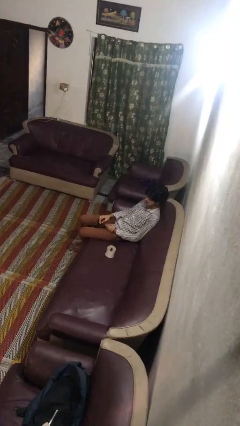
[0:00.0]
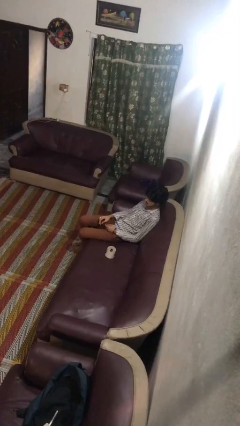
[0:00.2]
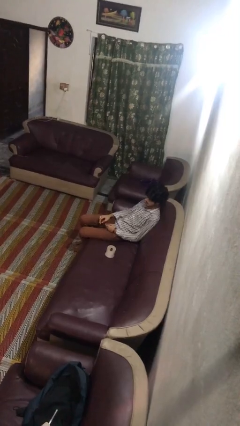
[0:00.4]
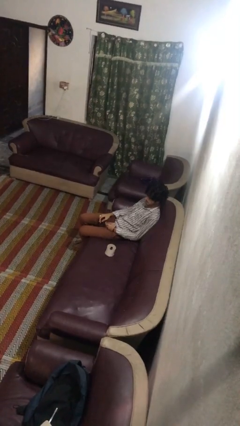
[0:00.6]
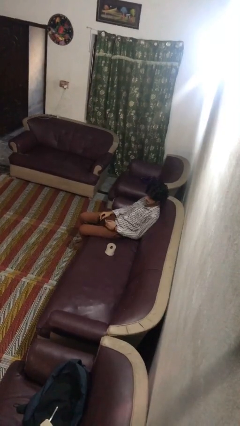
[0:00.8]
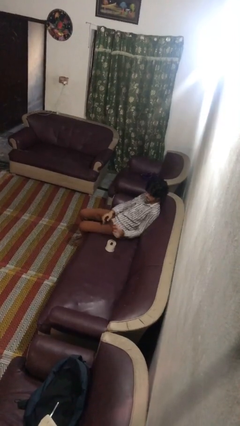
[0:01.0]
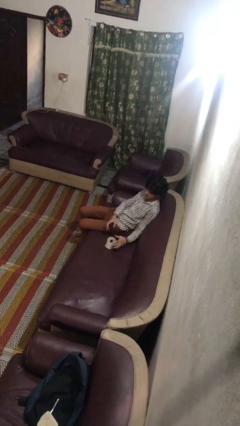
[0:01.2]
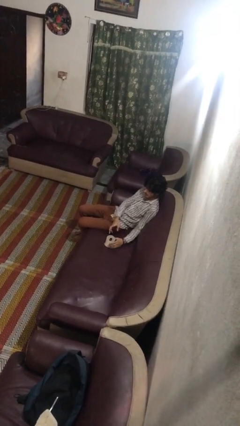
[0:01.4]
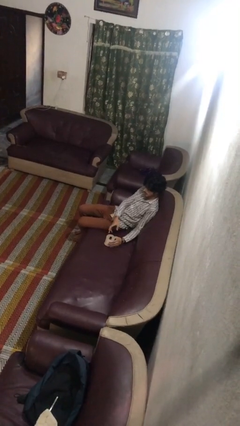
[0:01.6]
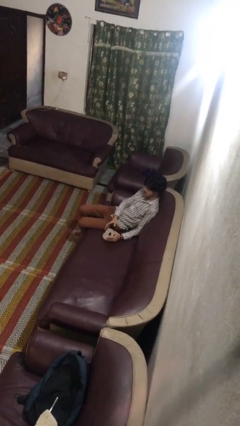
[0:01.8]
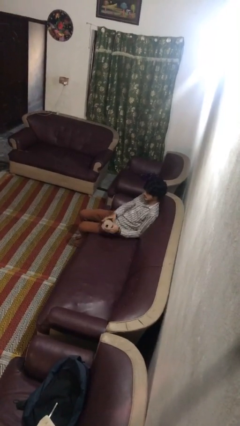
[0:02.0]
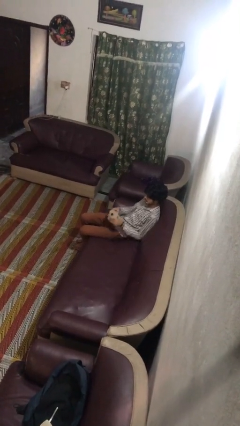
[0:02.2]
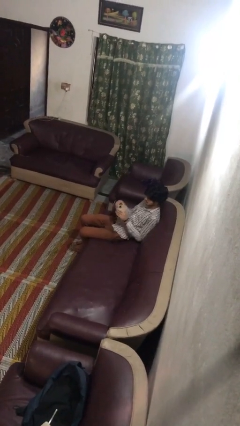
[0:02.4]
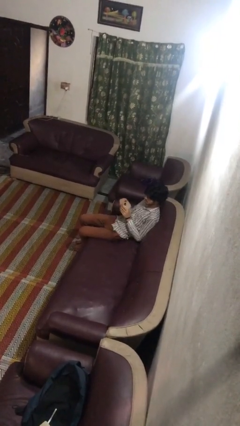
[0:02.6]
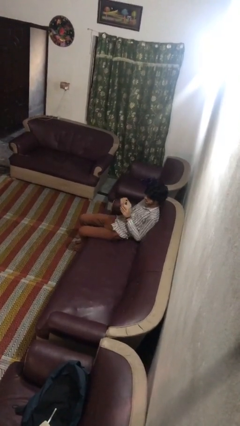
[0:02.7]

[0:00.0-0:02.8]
person picks up object from couch

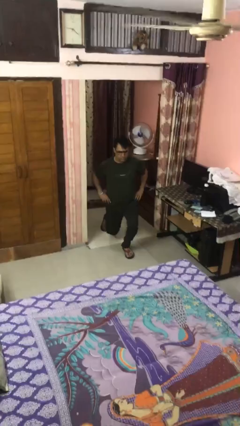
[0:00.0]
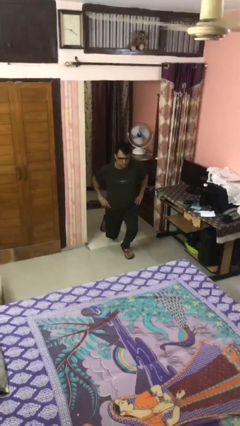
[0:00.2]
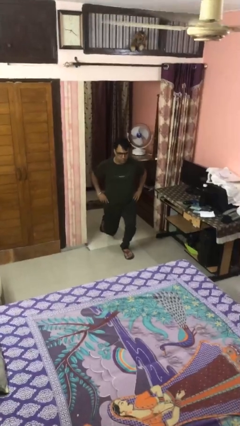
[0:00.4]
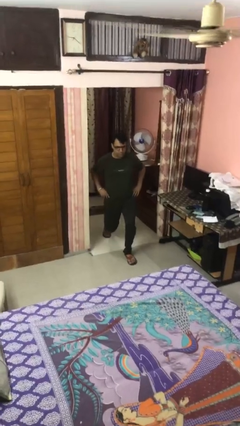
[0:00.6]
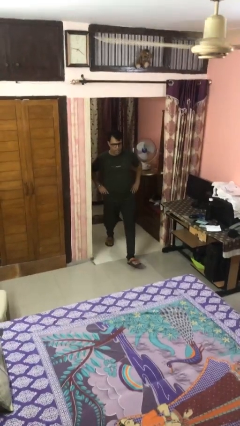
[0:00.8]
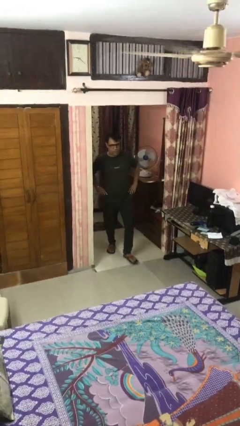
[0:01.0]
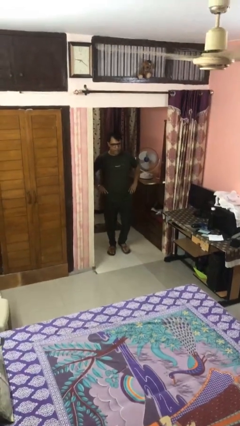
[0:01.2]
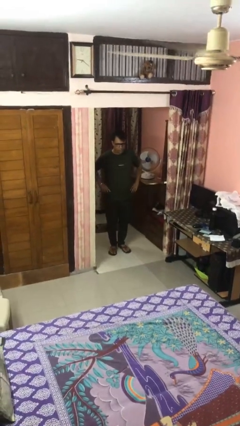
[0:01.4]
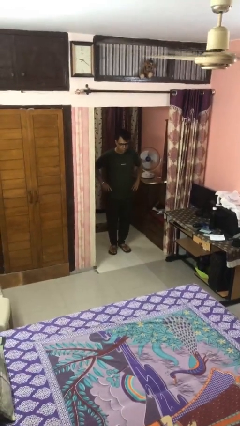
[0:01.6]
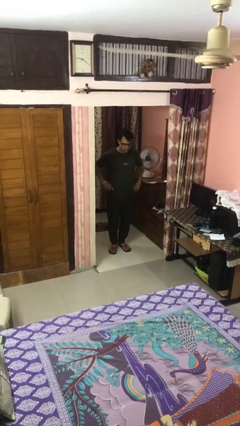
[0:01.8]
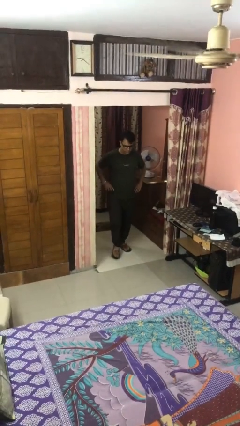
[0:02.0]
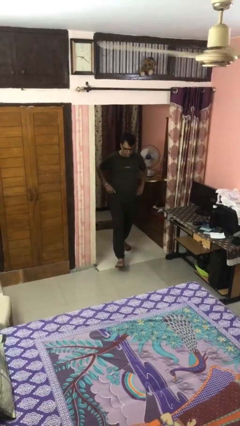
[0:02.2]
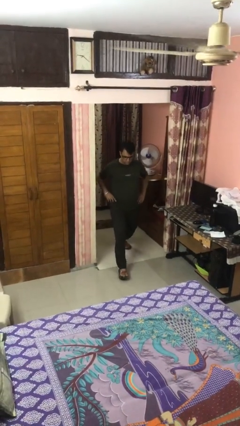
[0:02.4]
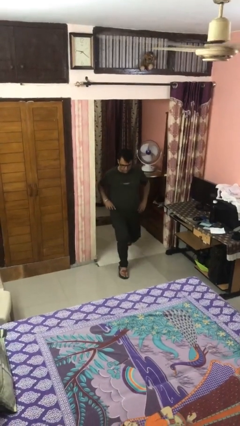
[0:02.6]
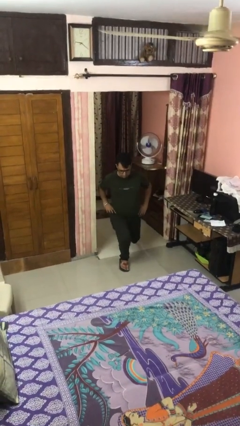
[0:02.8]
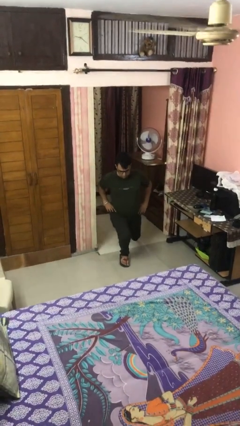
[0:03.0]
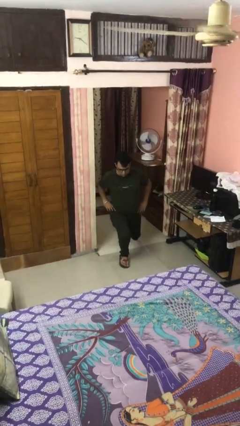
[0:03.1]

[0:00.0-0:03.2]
person exercises with lunges

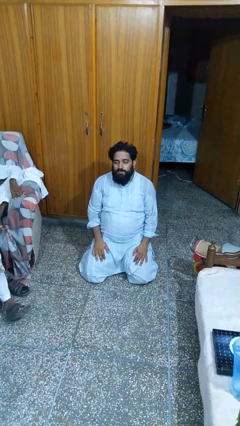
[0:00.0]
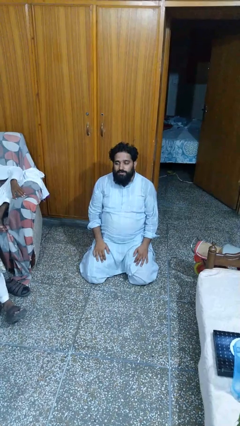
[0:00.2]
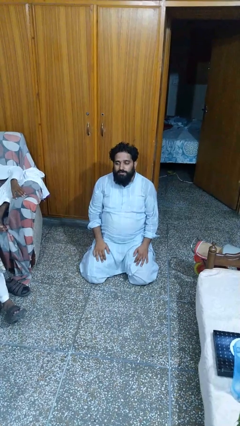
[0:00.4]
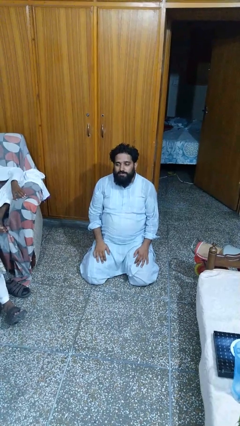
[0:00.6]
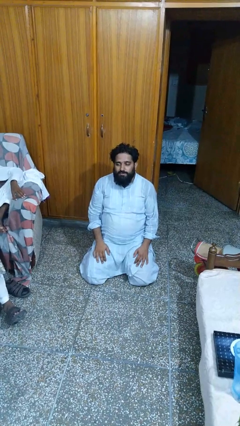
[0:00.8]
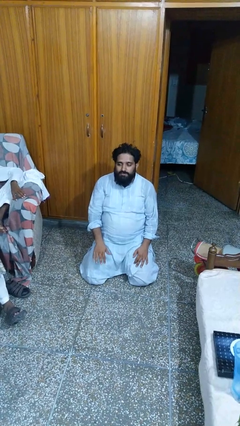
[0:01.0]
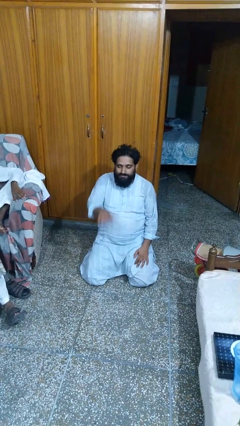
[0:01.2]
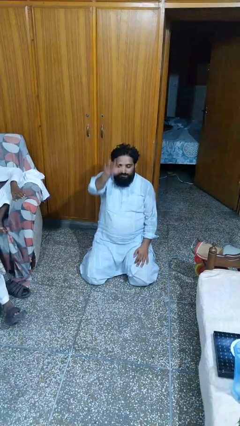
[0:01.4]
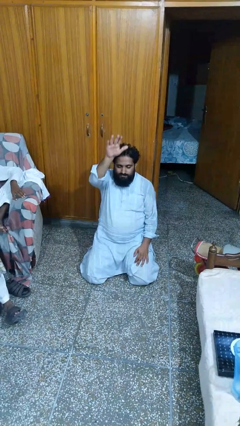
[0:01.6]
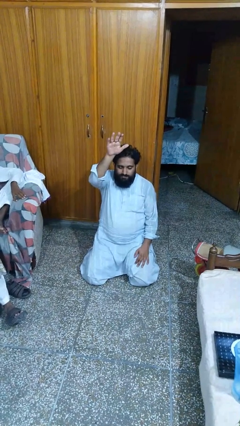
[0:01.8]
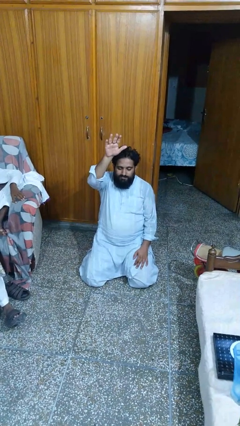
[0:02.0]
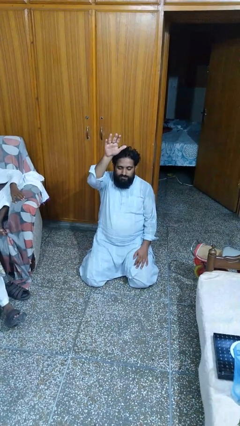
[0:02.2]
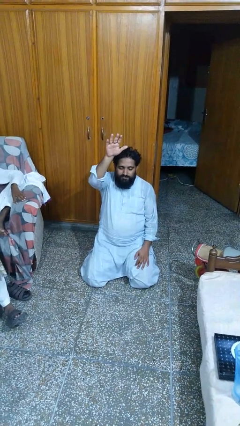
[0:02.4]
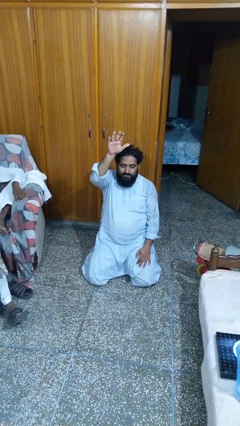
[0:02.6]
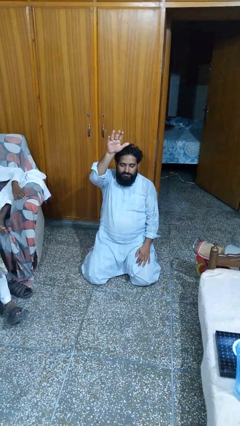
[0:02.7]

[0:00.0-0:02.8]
person gestures raise hand

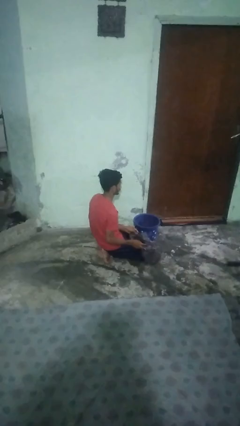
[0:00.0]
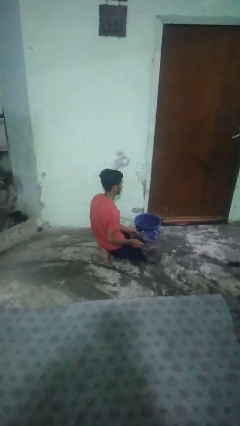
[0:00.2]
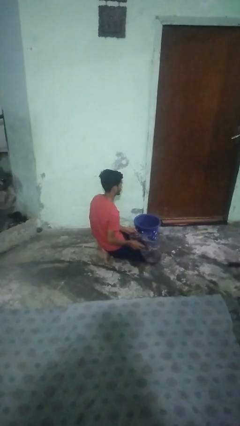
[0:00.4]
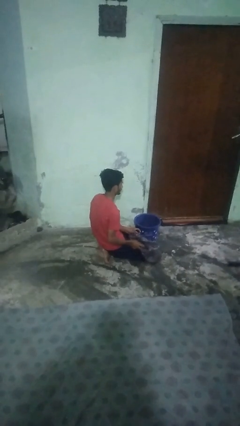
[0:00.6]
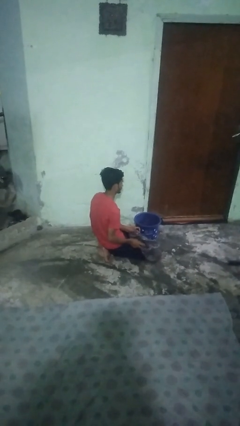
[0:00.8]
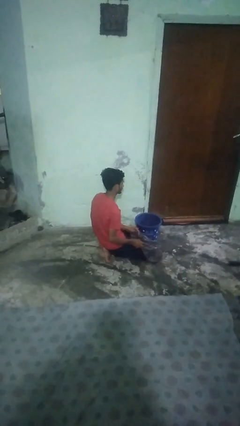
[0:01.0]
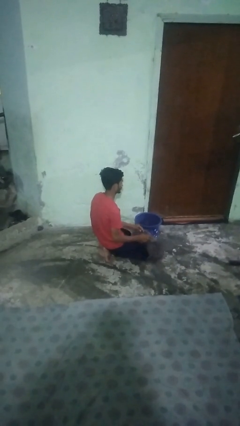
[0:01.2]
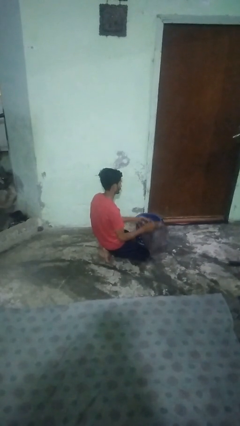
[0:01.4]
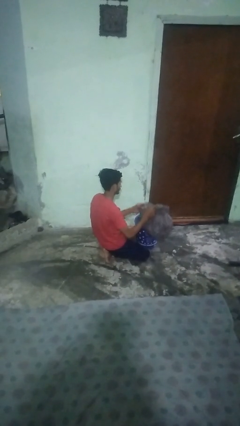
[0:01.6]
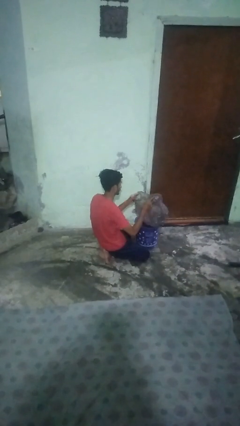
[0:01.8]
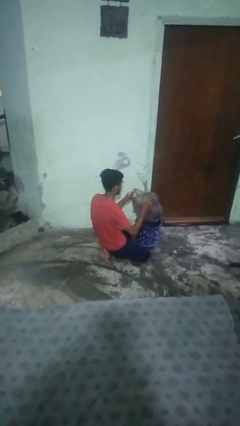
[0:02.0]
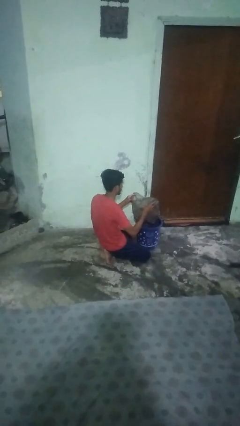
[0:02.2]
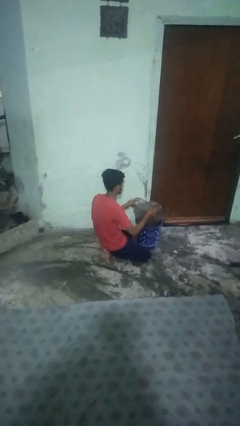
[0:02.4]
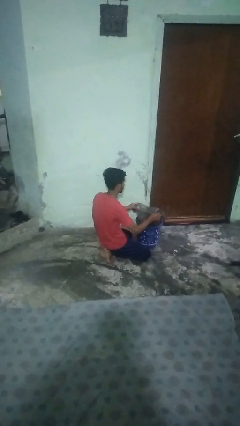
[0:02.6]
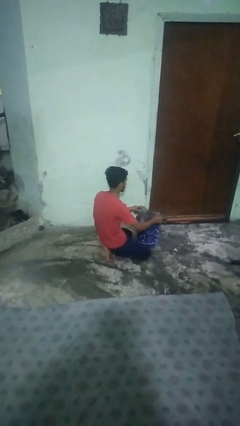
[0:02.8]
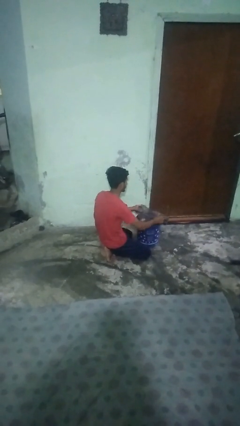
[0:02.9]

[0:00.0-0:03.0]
person inserts trashbag into trashcan

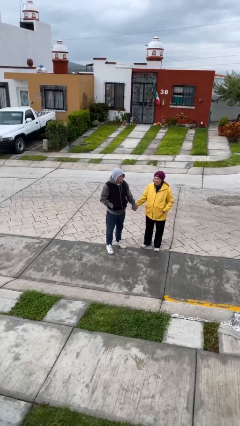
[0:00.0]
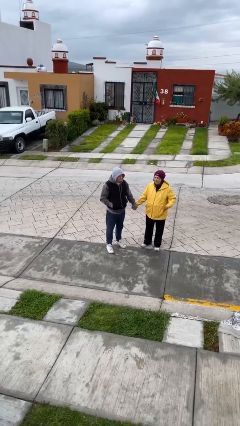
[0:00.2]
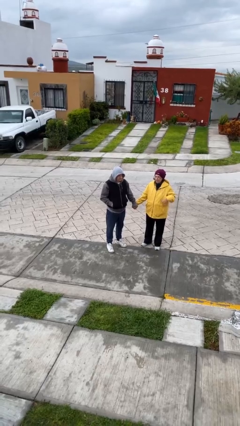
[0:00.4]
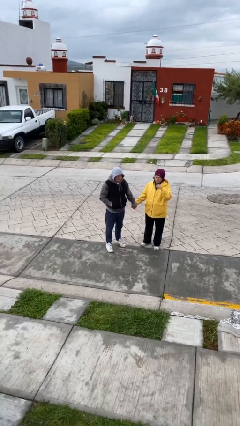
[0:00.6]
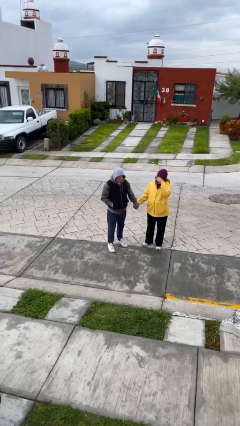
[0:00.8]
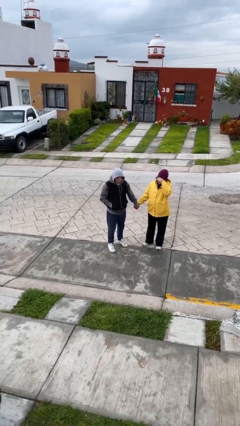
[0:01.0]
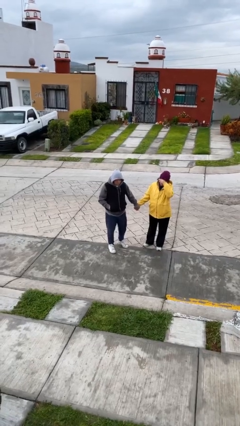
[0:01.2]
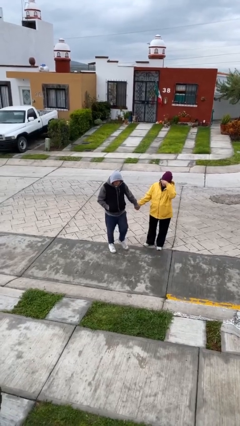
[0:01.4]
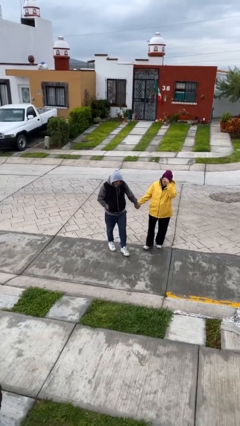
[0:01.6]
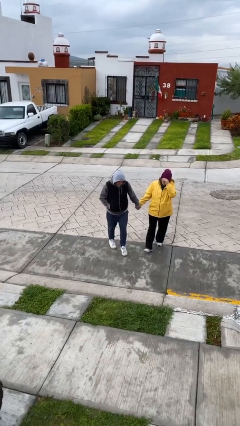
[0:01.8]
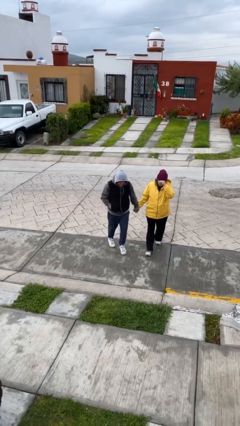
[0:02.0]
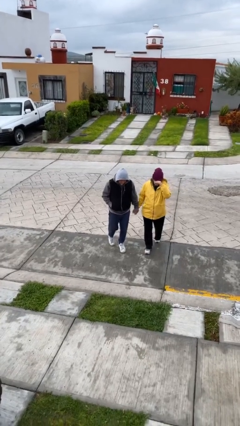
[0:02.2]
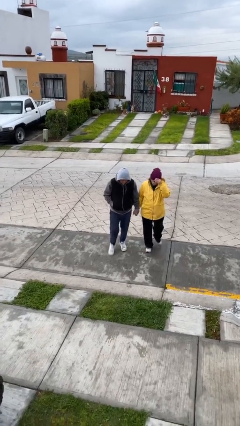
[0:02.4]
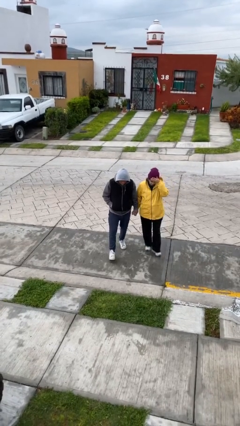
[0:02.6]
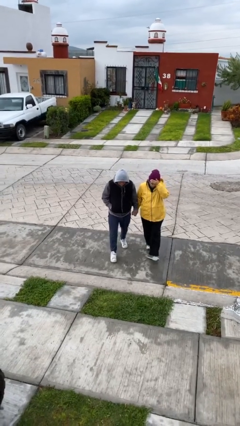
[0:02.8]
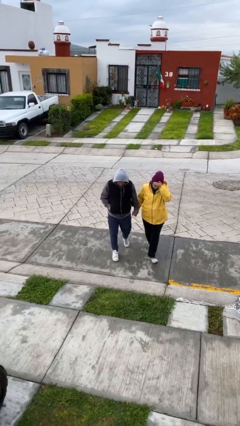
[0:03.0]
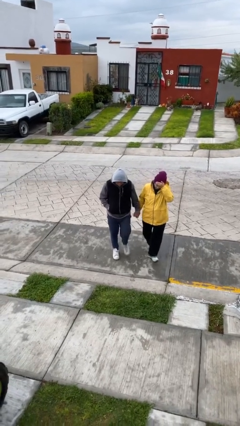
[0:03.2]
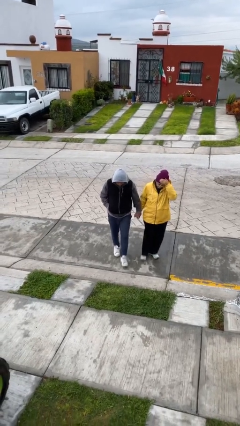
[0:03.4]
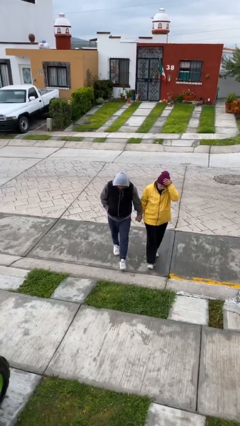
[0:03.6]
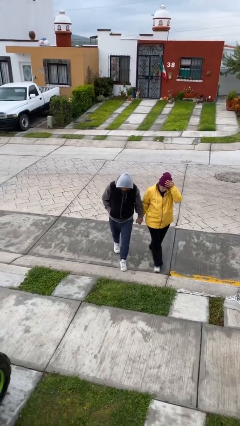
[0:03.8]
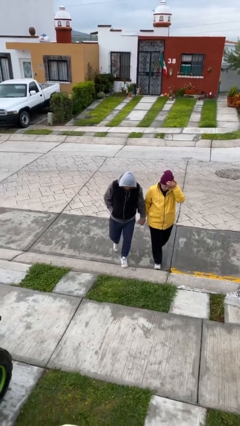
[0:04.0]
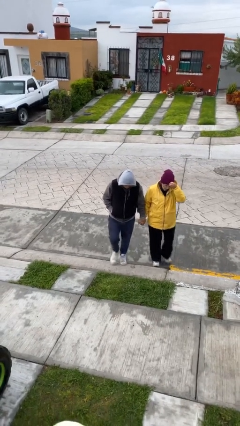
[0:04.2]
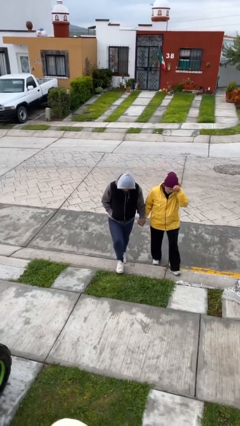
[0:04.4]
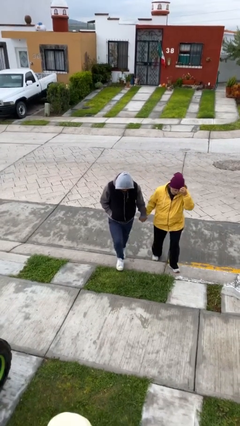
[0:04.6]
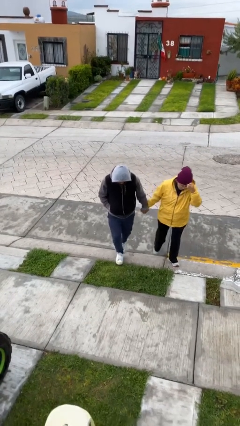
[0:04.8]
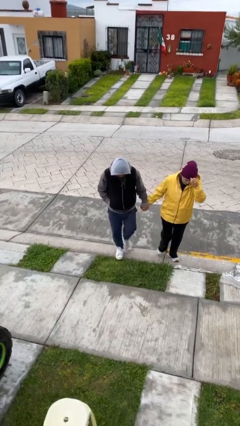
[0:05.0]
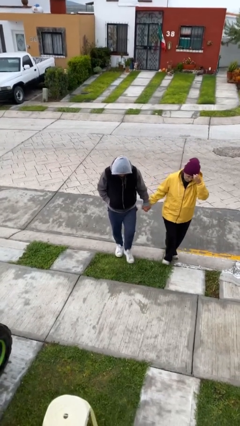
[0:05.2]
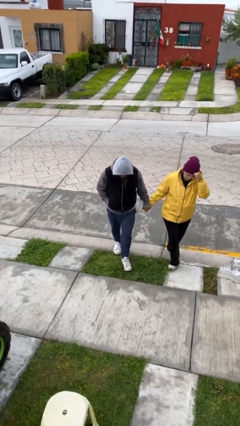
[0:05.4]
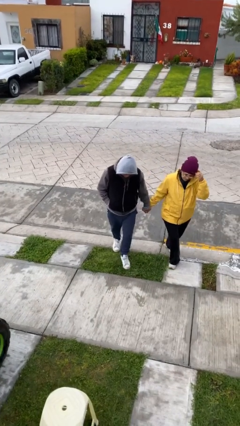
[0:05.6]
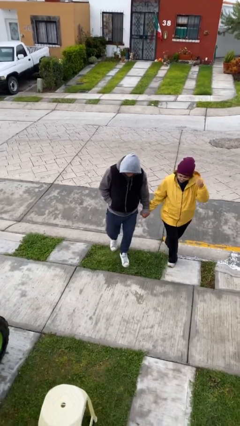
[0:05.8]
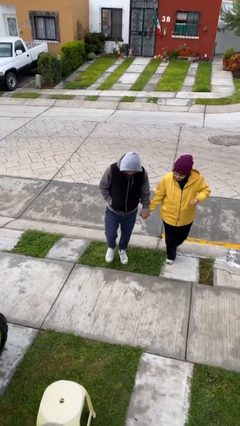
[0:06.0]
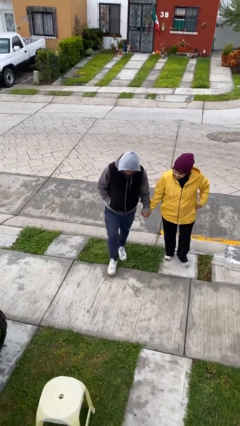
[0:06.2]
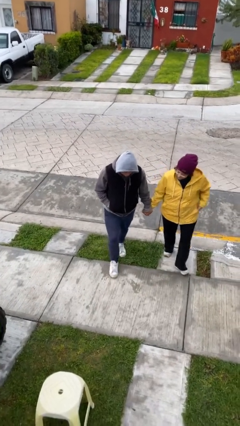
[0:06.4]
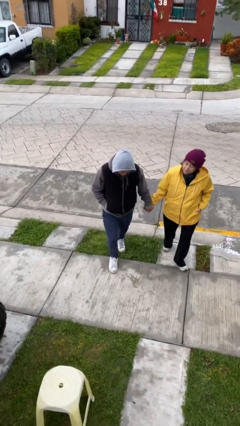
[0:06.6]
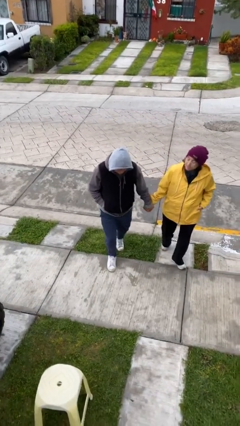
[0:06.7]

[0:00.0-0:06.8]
person holds hand
